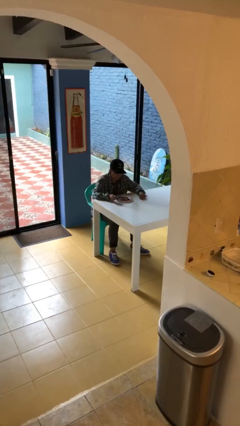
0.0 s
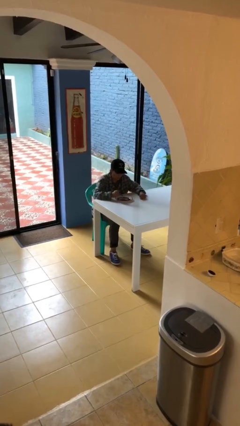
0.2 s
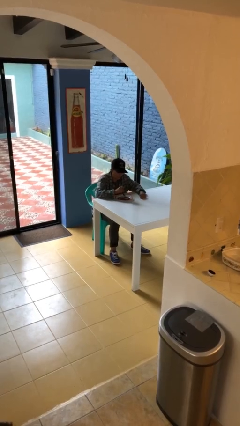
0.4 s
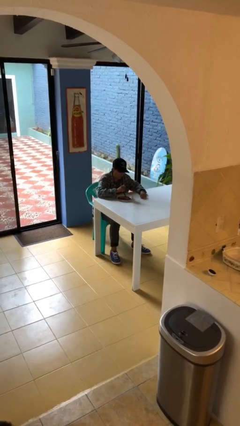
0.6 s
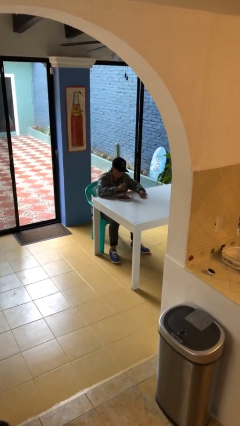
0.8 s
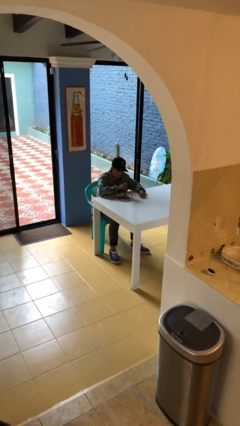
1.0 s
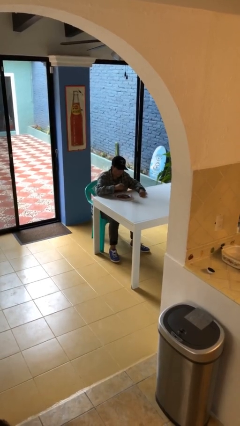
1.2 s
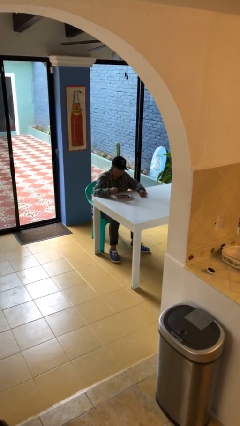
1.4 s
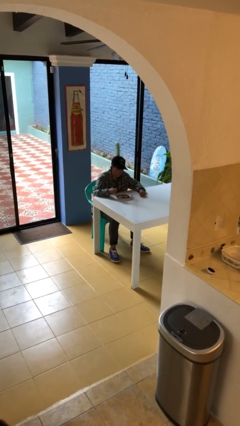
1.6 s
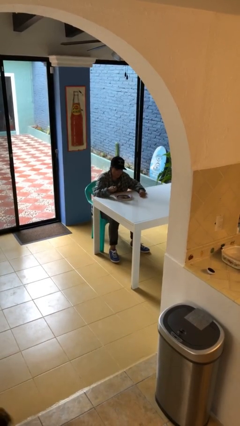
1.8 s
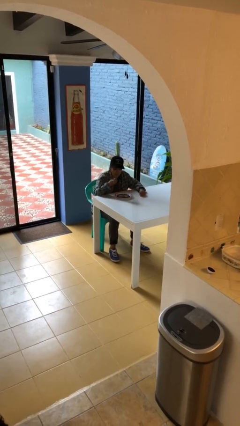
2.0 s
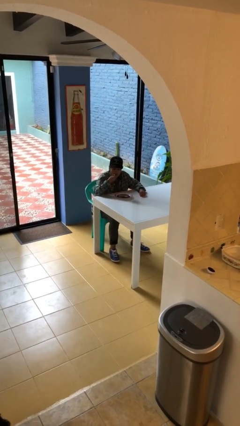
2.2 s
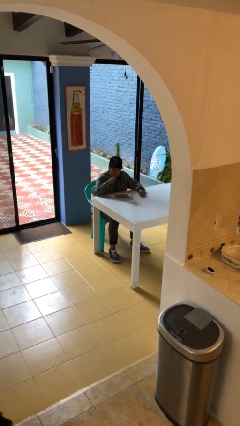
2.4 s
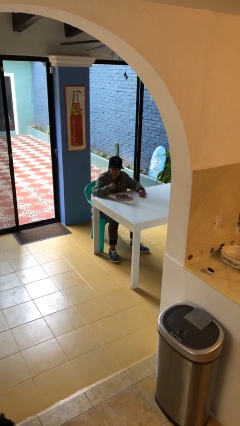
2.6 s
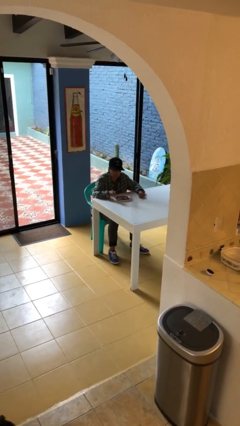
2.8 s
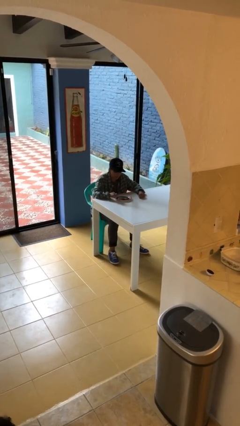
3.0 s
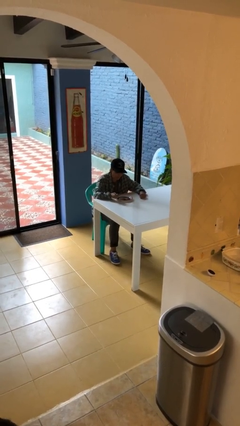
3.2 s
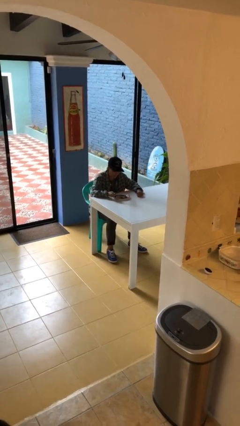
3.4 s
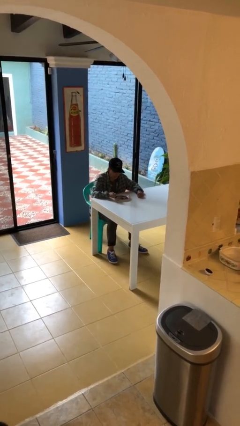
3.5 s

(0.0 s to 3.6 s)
person eats with utensil

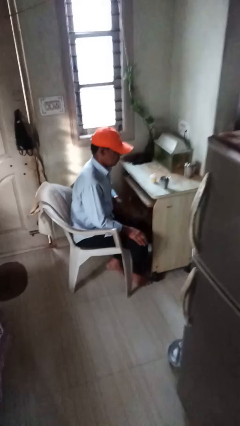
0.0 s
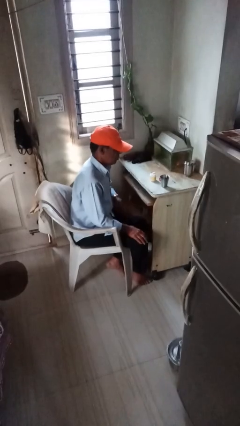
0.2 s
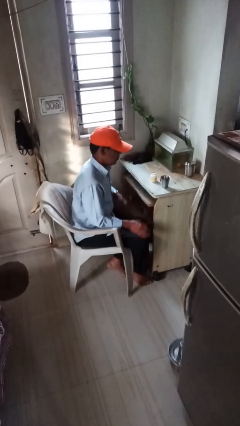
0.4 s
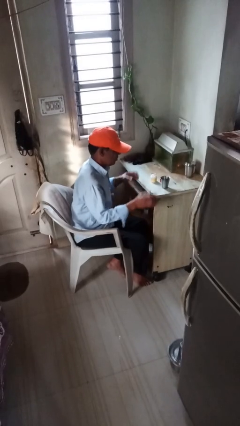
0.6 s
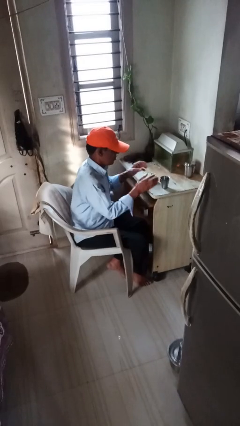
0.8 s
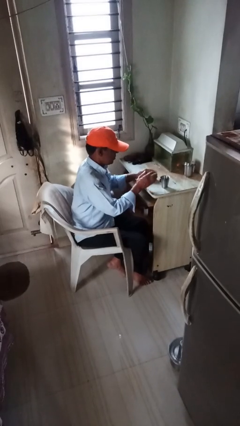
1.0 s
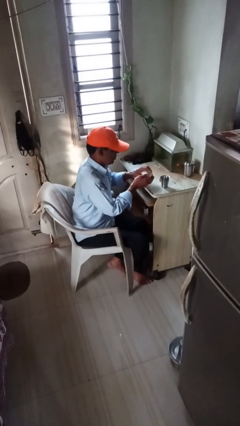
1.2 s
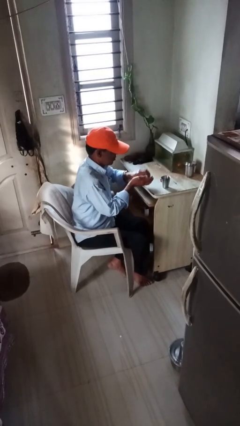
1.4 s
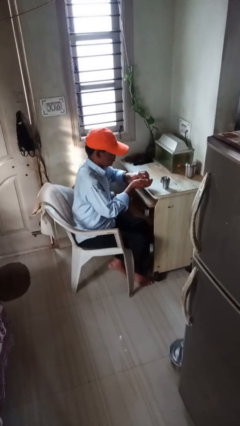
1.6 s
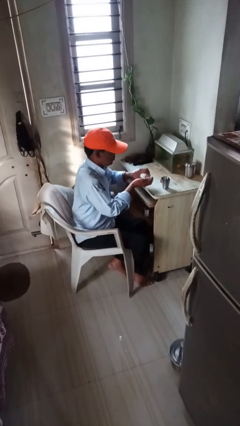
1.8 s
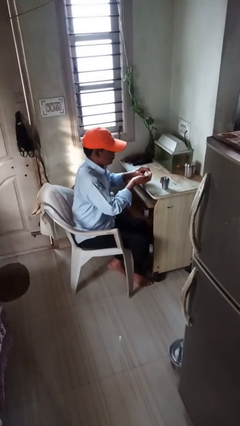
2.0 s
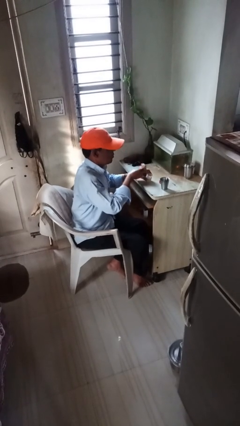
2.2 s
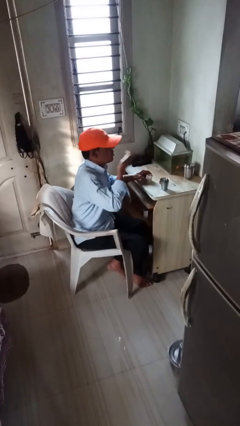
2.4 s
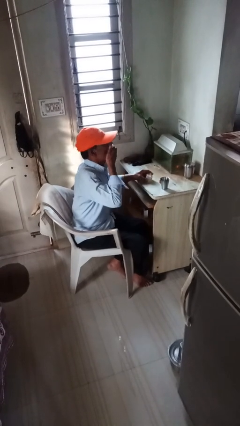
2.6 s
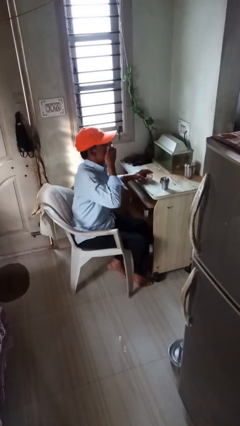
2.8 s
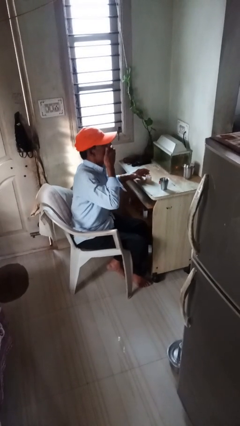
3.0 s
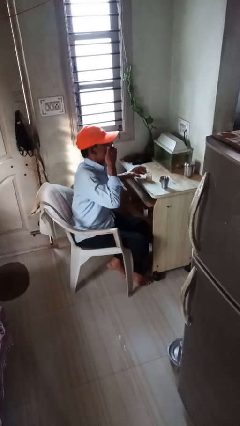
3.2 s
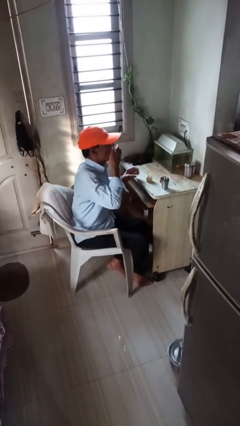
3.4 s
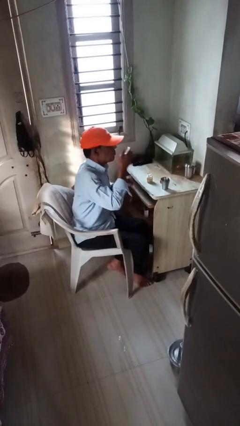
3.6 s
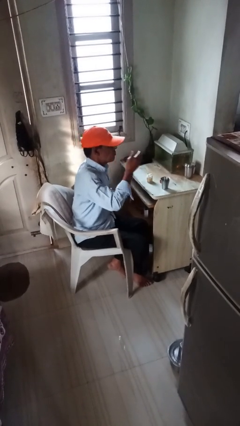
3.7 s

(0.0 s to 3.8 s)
person takes medicine pills

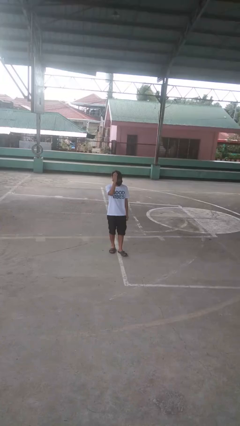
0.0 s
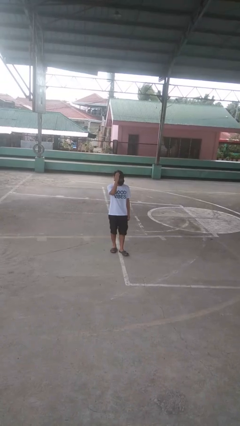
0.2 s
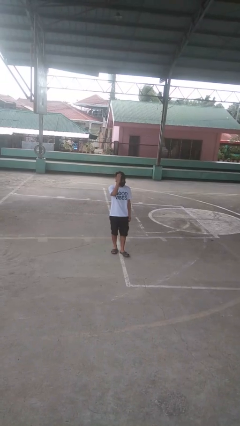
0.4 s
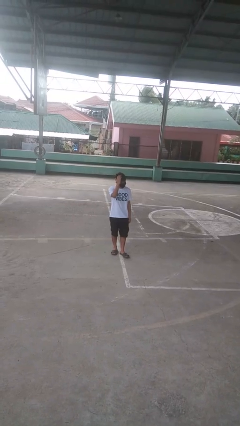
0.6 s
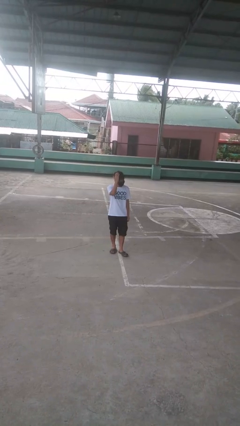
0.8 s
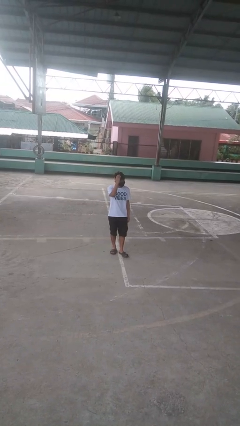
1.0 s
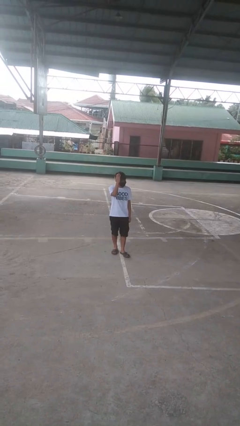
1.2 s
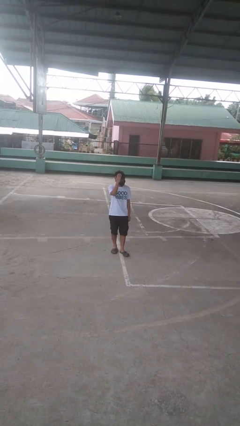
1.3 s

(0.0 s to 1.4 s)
person pats head

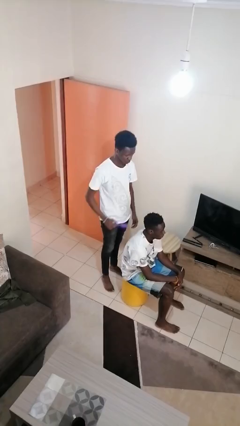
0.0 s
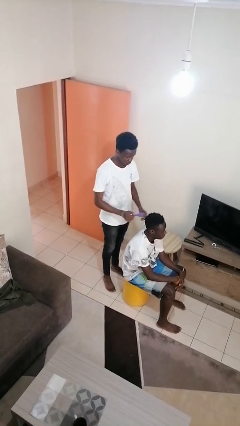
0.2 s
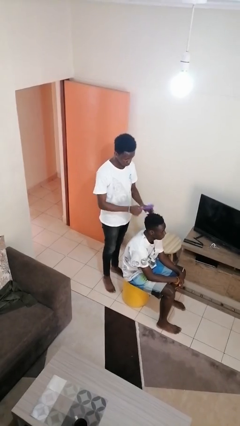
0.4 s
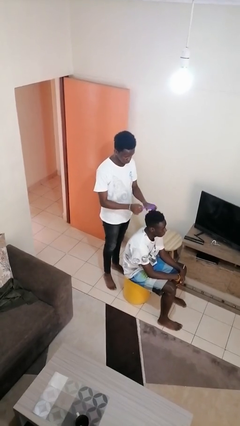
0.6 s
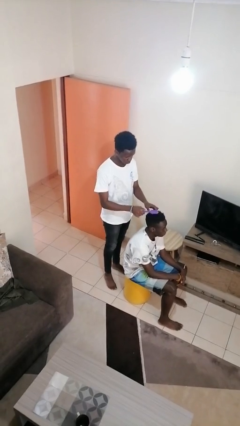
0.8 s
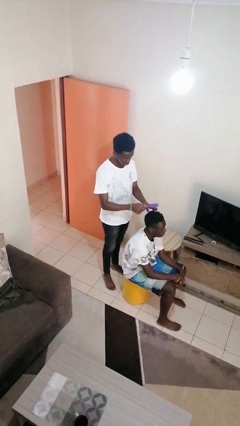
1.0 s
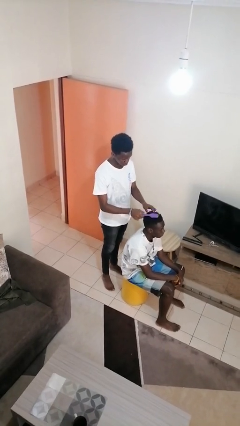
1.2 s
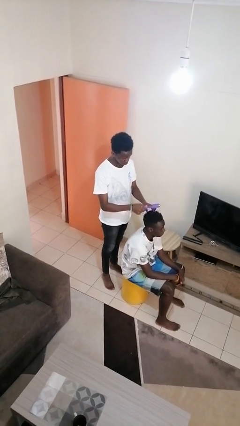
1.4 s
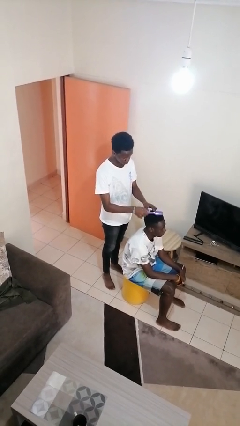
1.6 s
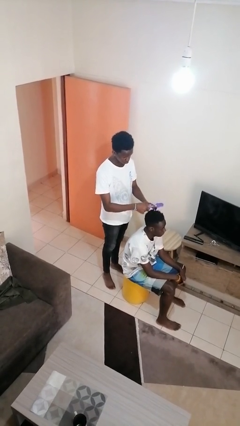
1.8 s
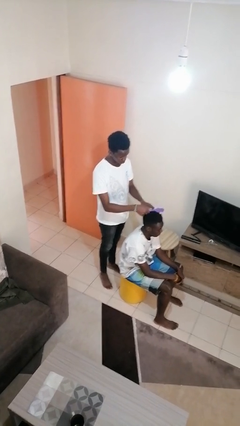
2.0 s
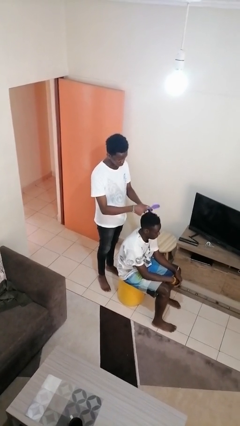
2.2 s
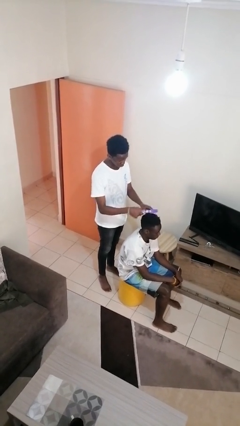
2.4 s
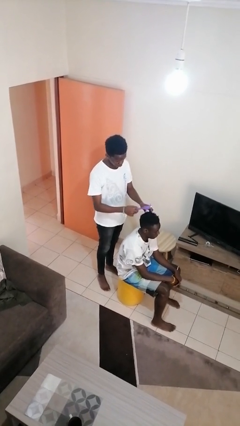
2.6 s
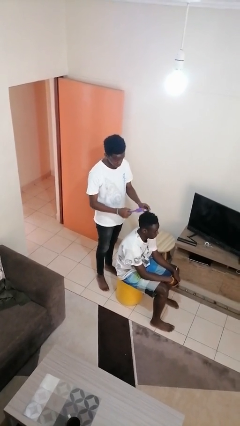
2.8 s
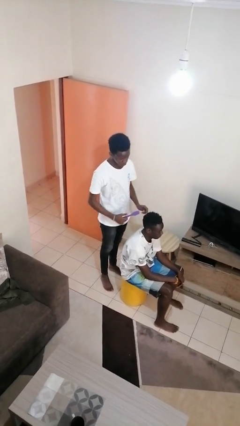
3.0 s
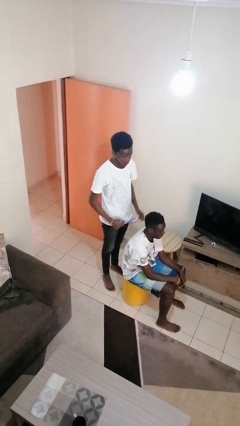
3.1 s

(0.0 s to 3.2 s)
person brushes hair of person

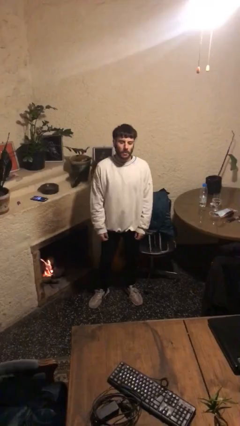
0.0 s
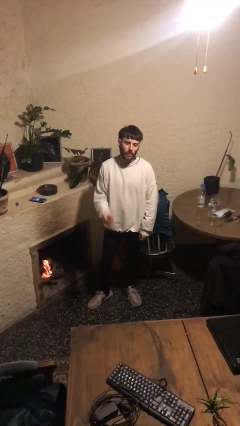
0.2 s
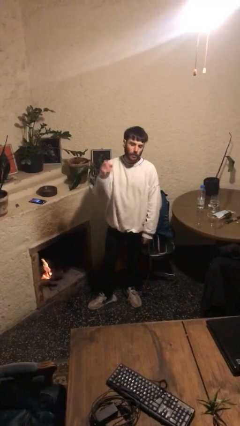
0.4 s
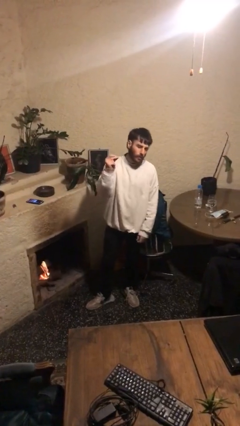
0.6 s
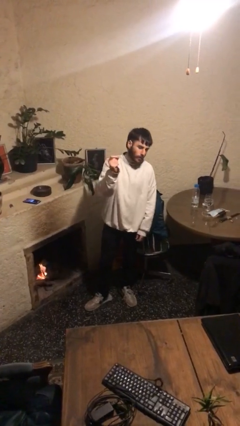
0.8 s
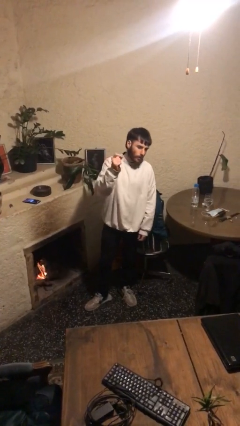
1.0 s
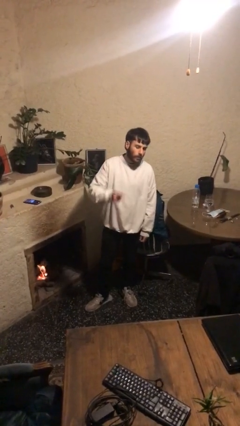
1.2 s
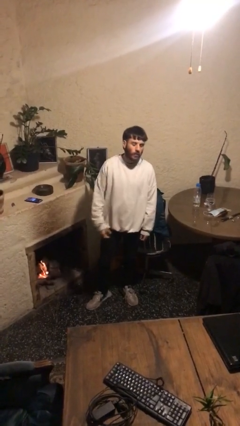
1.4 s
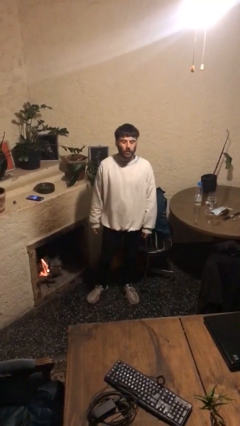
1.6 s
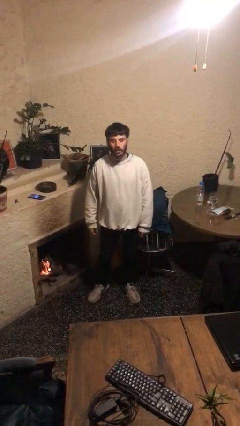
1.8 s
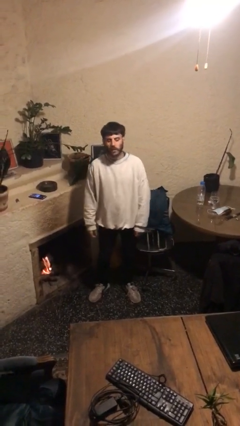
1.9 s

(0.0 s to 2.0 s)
person snaps fingers

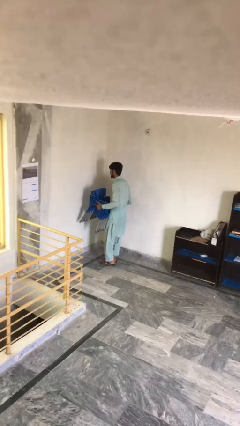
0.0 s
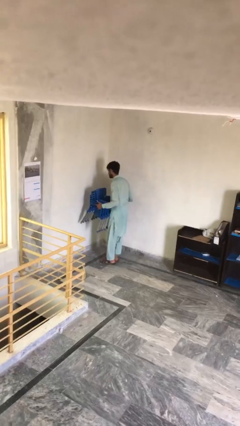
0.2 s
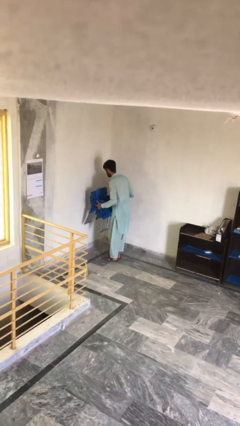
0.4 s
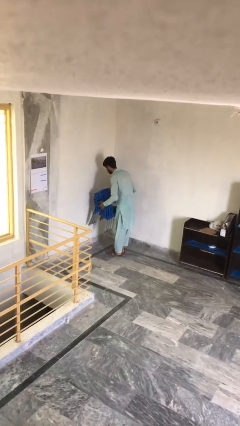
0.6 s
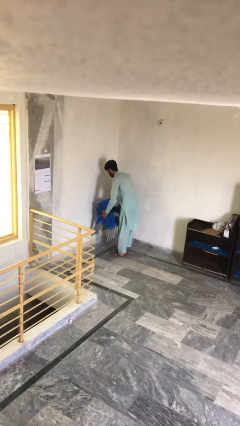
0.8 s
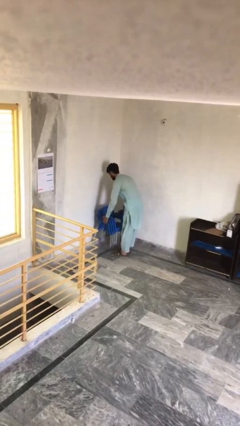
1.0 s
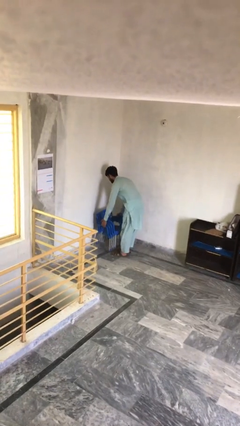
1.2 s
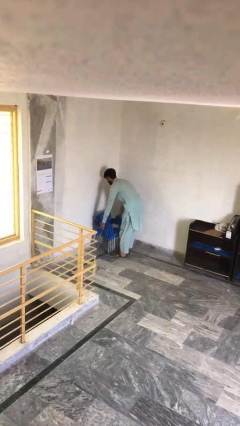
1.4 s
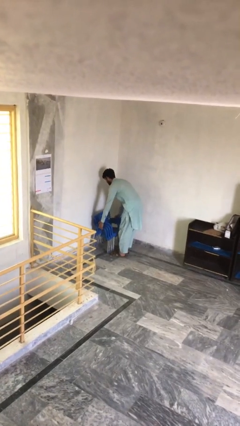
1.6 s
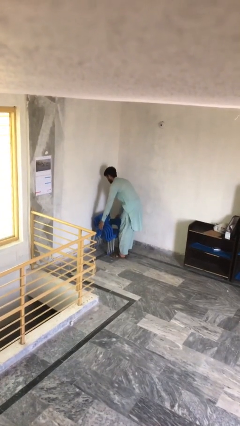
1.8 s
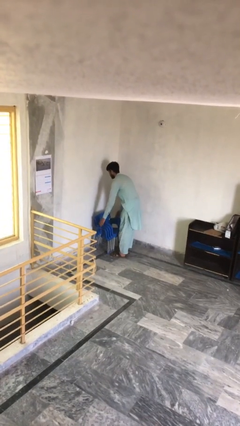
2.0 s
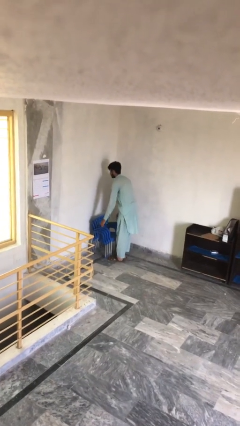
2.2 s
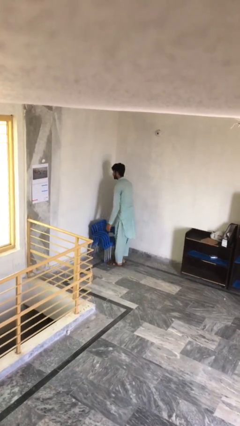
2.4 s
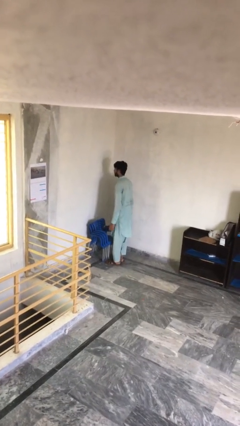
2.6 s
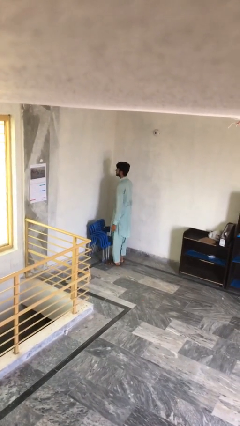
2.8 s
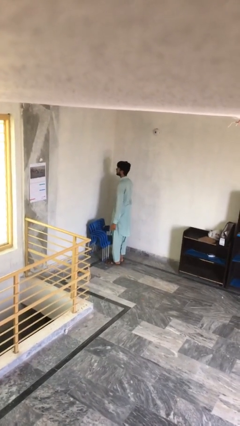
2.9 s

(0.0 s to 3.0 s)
person puts down object on floor

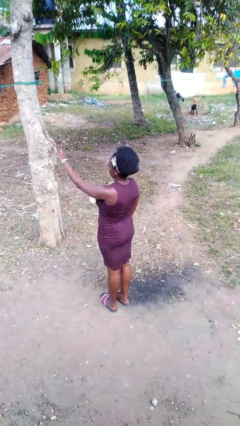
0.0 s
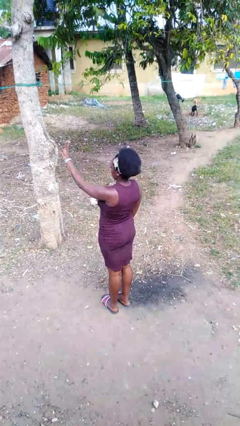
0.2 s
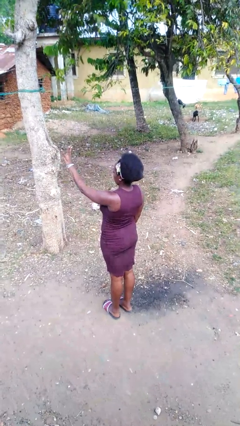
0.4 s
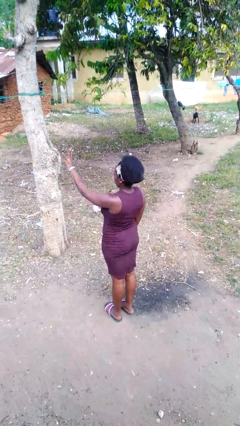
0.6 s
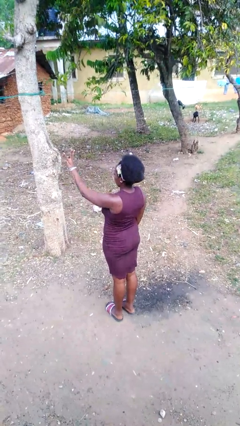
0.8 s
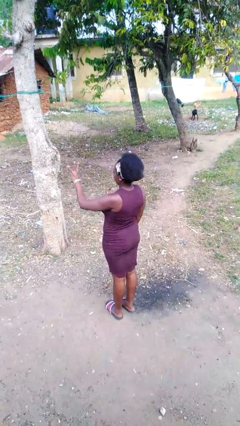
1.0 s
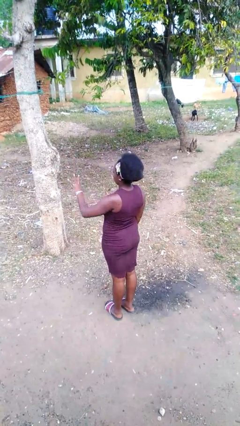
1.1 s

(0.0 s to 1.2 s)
person gestures number three
